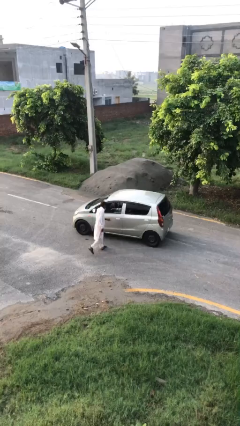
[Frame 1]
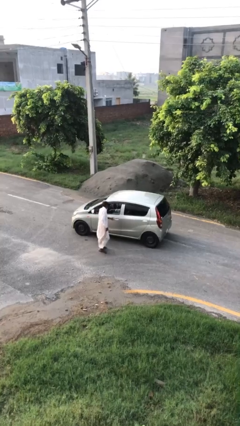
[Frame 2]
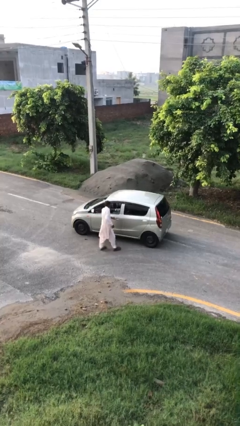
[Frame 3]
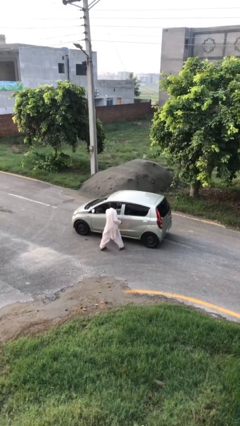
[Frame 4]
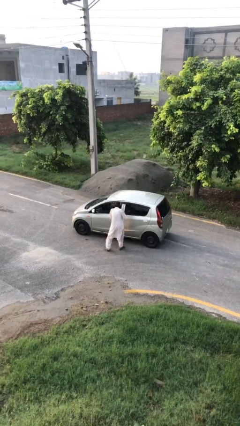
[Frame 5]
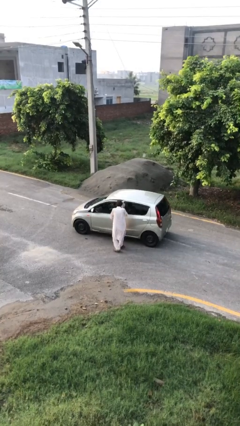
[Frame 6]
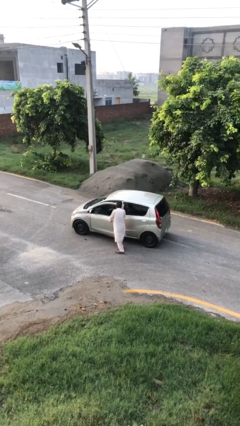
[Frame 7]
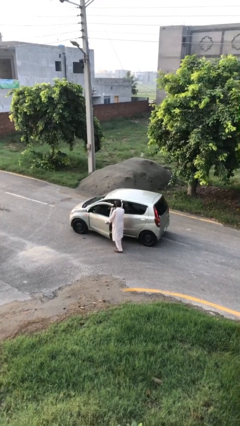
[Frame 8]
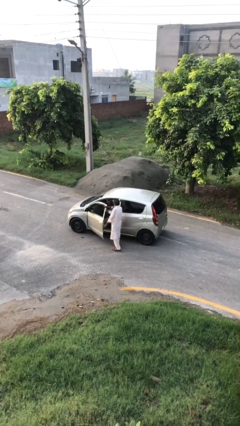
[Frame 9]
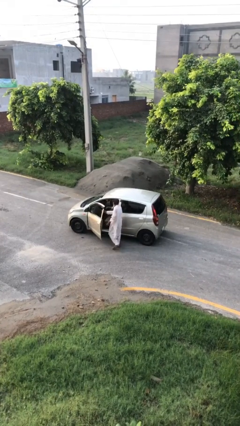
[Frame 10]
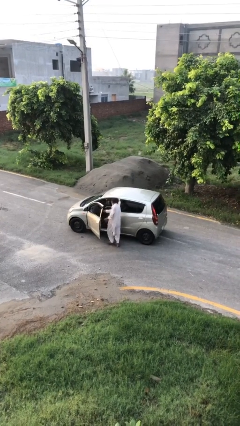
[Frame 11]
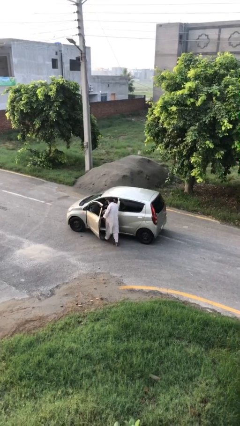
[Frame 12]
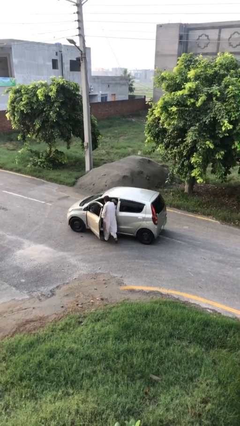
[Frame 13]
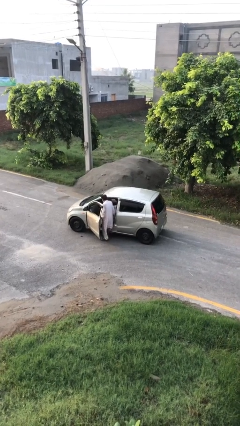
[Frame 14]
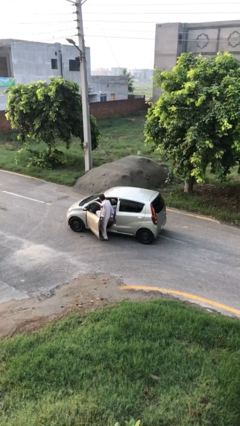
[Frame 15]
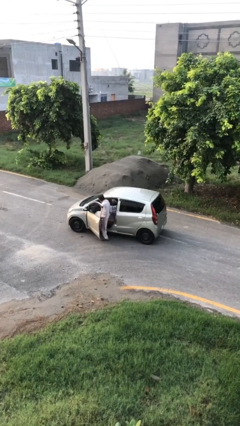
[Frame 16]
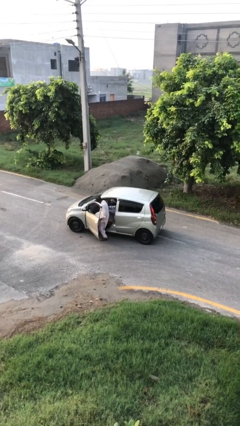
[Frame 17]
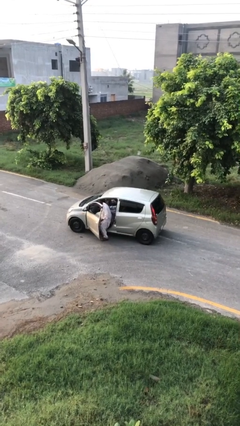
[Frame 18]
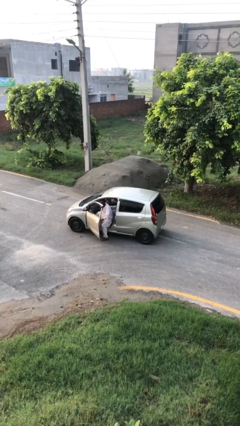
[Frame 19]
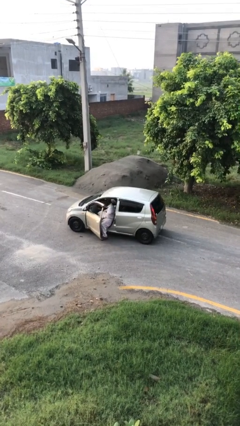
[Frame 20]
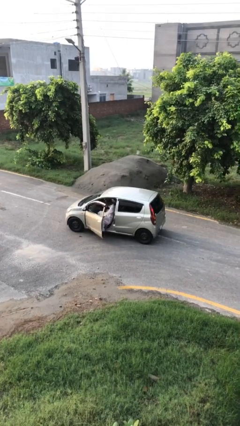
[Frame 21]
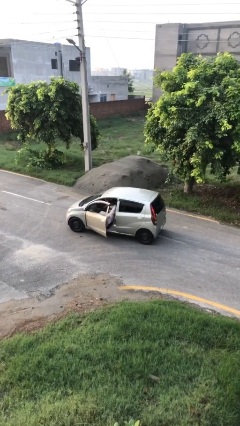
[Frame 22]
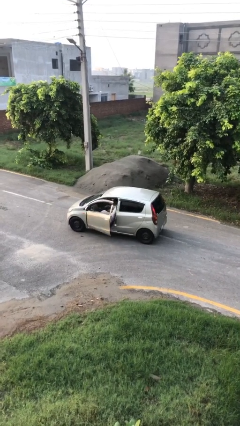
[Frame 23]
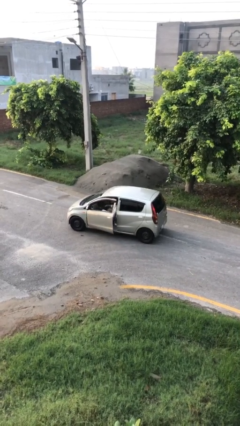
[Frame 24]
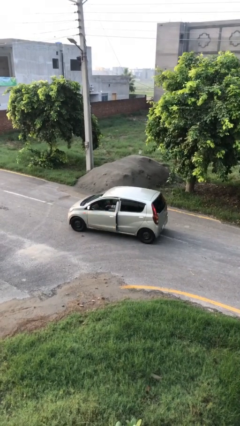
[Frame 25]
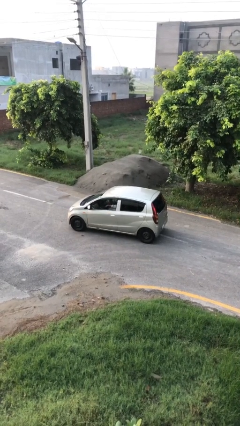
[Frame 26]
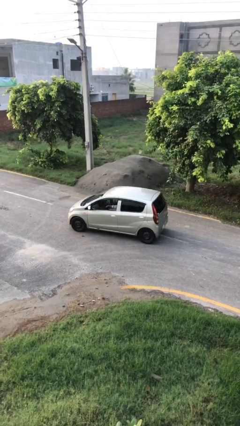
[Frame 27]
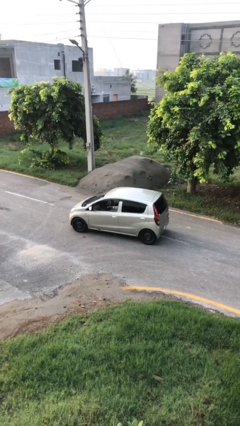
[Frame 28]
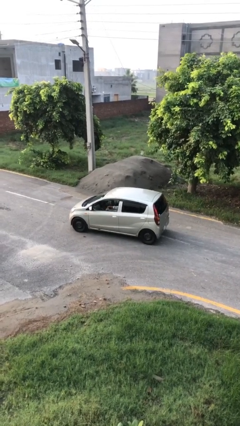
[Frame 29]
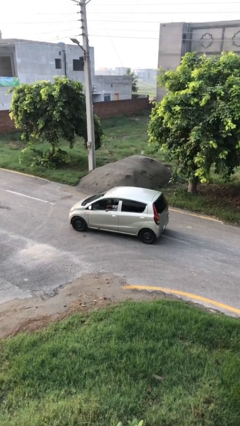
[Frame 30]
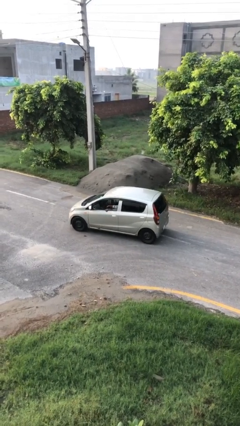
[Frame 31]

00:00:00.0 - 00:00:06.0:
car drops off person

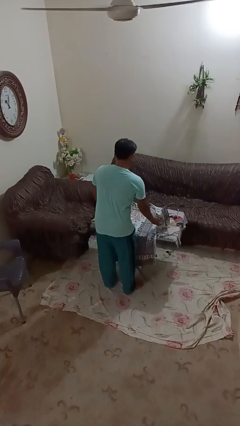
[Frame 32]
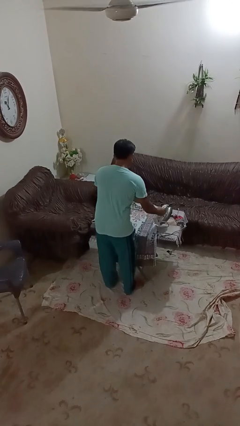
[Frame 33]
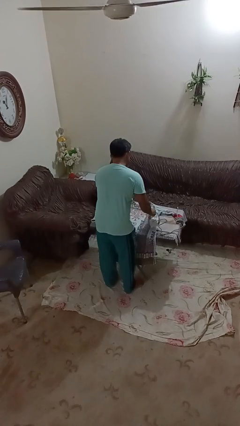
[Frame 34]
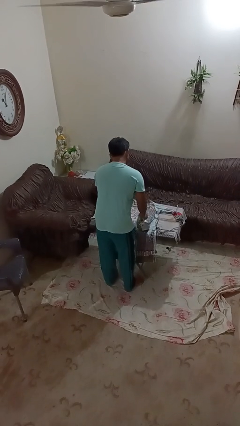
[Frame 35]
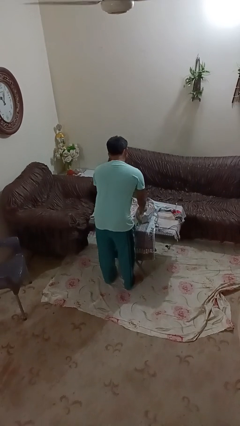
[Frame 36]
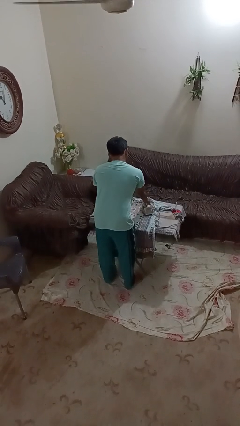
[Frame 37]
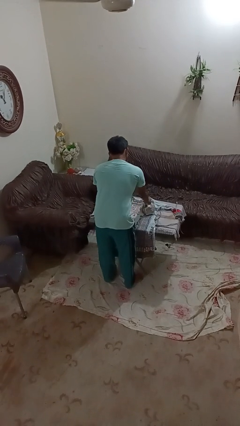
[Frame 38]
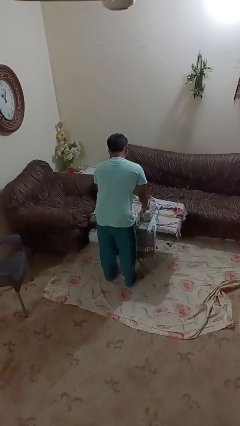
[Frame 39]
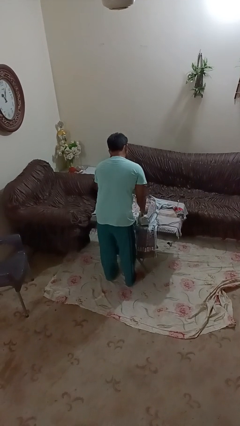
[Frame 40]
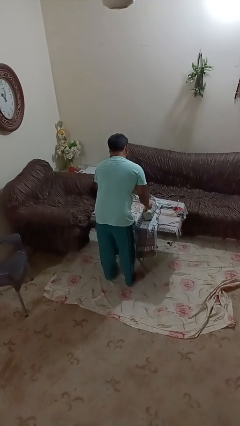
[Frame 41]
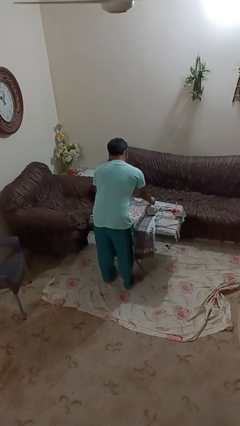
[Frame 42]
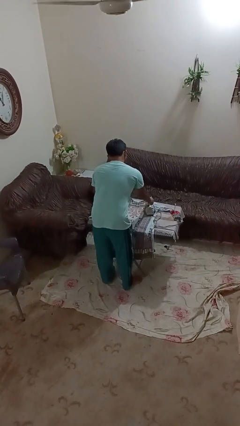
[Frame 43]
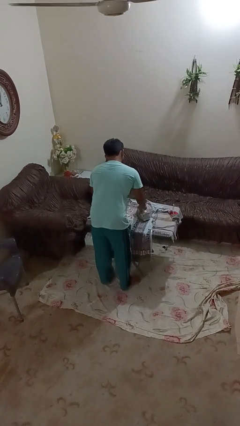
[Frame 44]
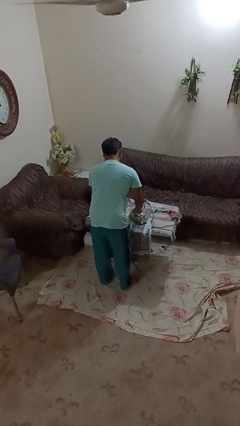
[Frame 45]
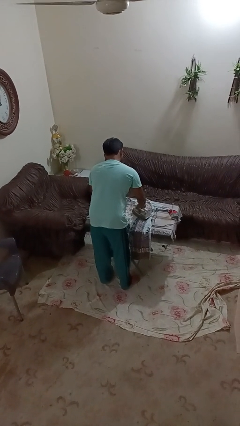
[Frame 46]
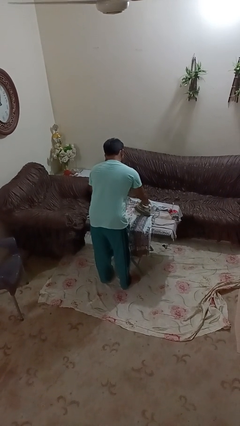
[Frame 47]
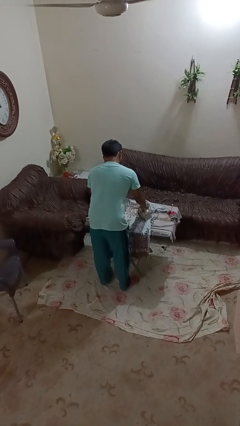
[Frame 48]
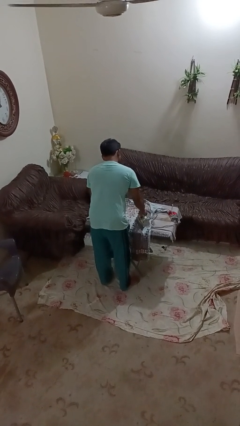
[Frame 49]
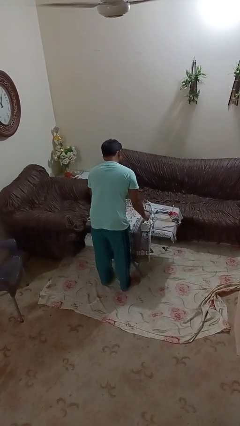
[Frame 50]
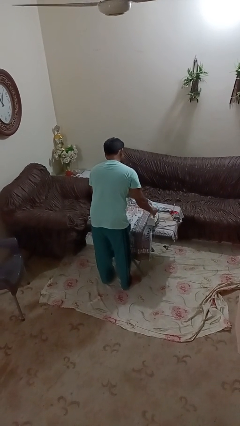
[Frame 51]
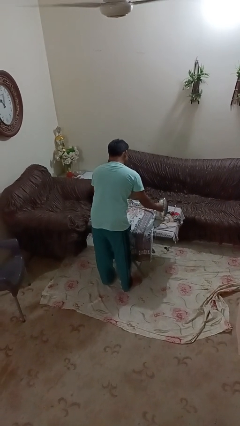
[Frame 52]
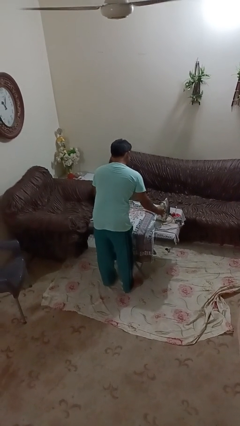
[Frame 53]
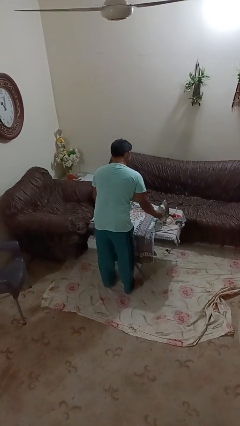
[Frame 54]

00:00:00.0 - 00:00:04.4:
person irons clothes

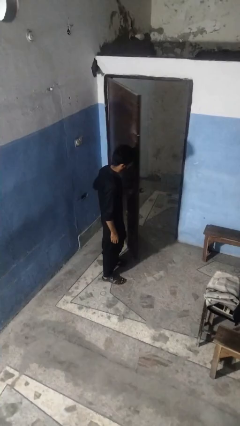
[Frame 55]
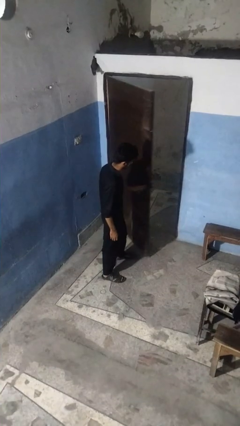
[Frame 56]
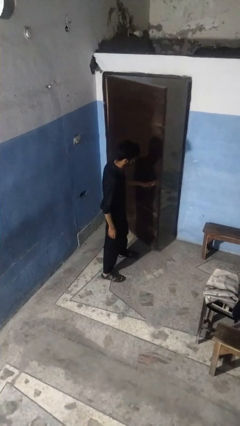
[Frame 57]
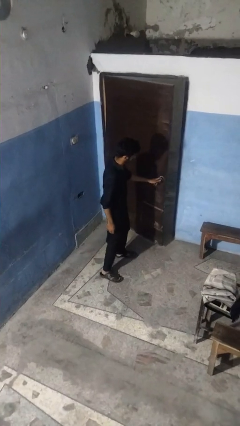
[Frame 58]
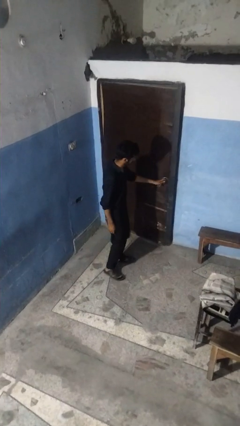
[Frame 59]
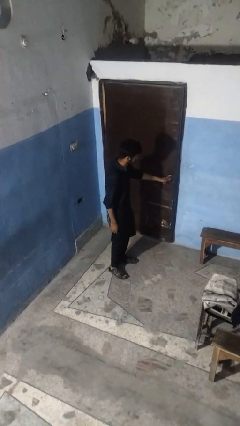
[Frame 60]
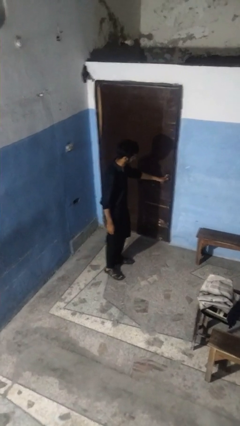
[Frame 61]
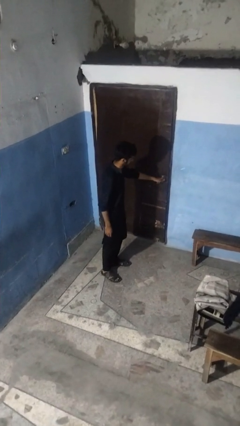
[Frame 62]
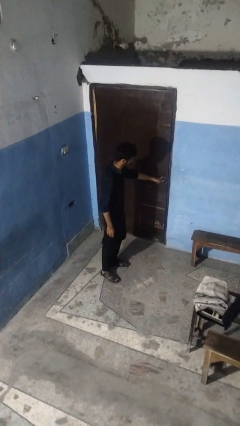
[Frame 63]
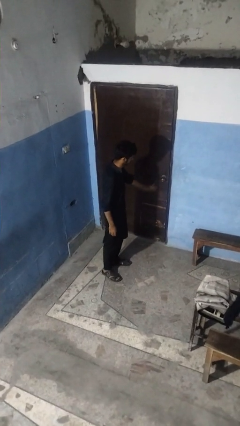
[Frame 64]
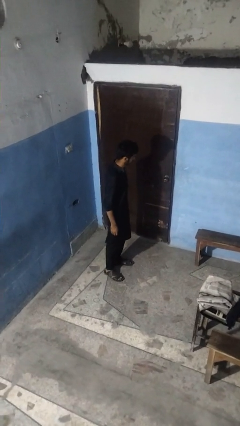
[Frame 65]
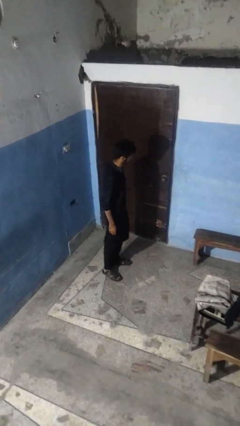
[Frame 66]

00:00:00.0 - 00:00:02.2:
person closes facility door

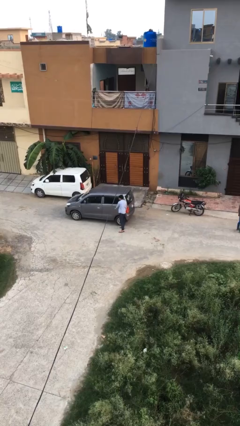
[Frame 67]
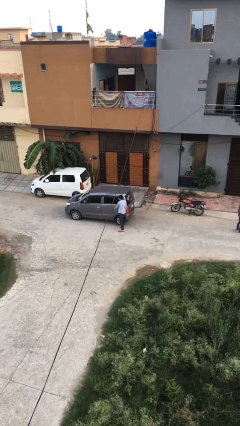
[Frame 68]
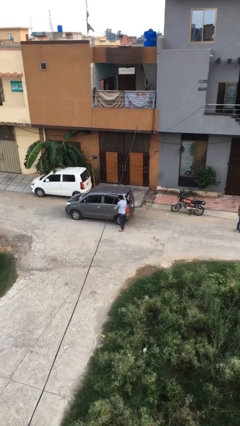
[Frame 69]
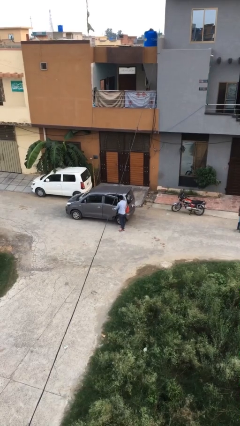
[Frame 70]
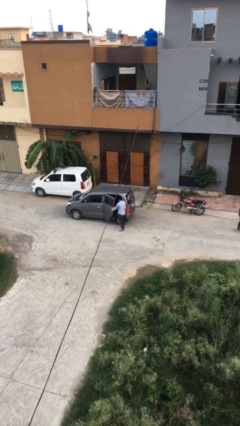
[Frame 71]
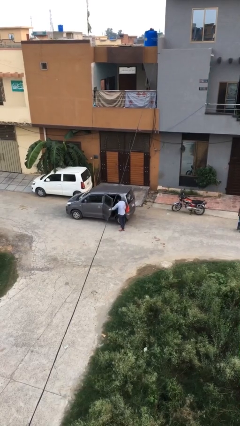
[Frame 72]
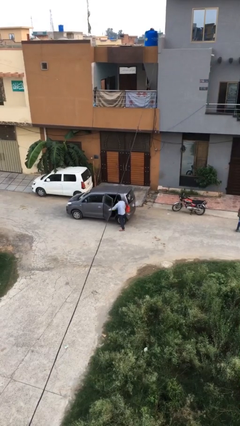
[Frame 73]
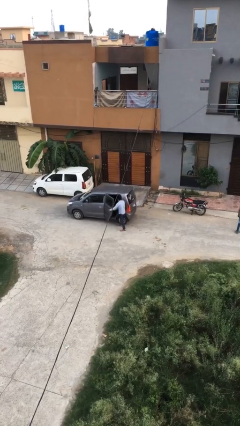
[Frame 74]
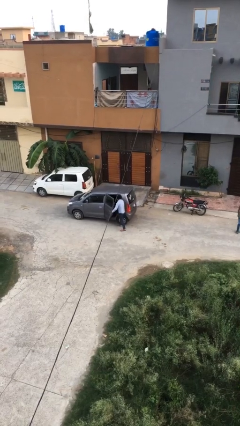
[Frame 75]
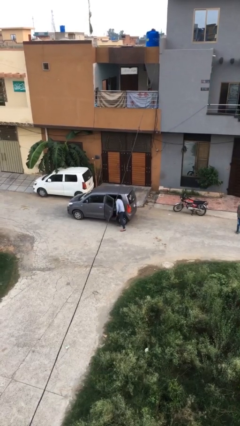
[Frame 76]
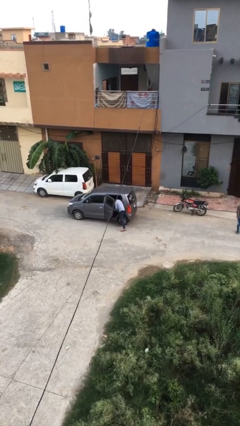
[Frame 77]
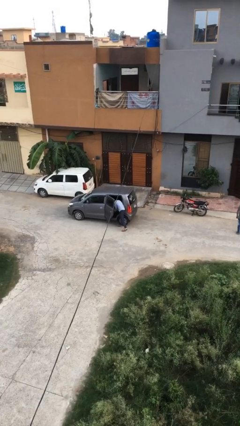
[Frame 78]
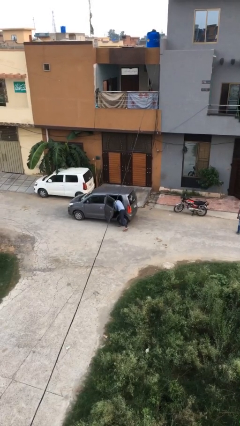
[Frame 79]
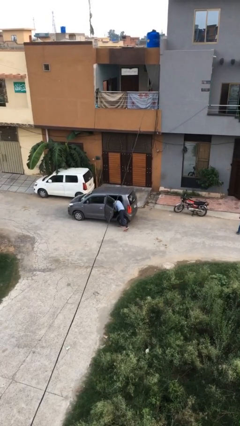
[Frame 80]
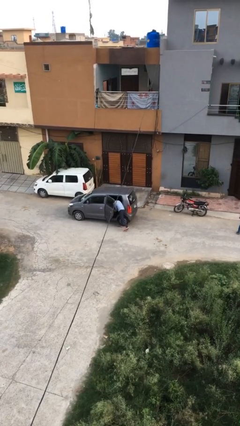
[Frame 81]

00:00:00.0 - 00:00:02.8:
person opens car door

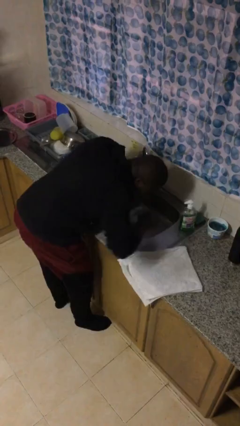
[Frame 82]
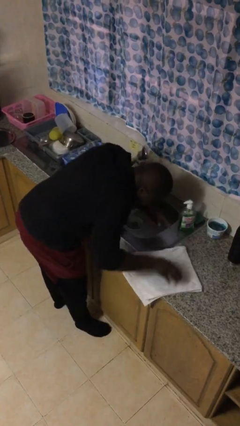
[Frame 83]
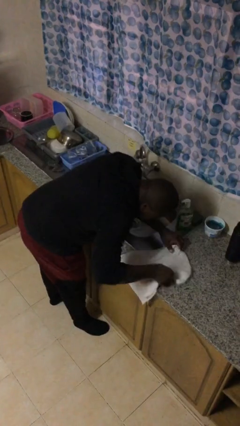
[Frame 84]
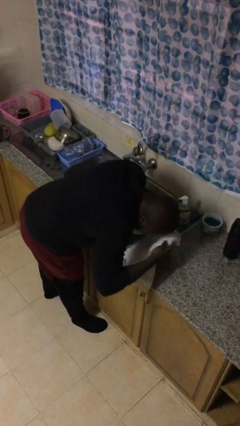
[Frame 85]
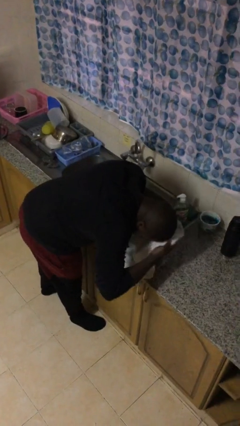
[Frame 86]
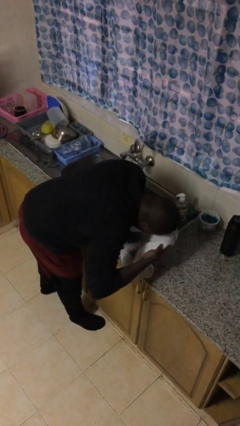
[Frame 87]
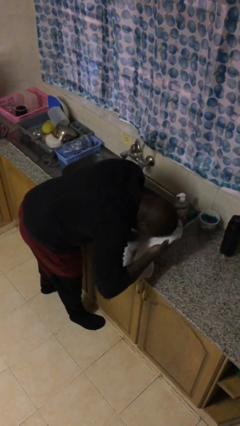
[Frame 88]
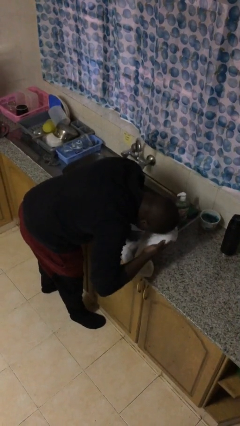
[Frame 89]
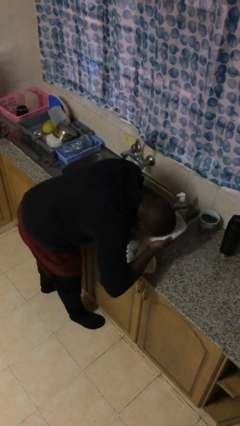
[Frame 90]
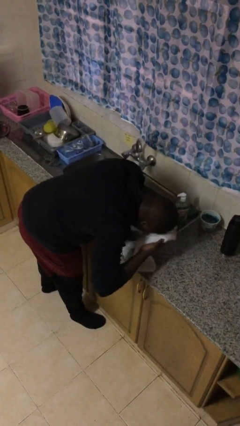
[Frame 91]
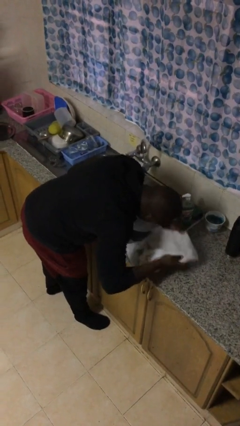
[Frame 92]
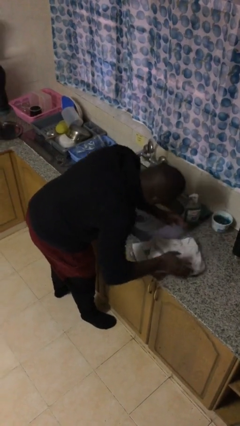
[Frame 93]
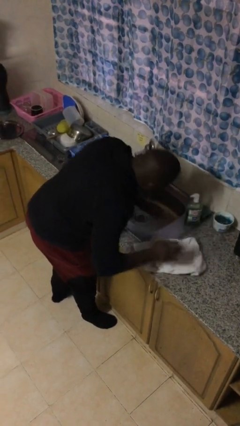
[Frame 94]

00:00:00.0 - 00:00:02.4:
person dries face with towel
